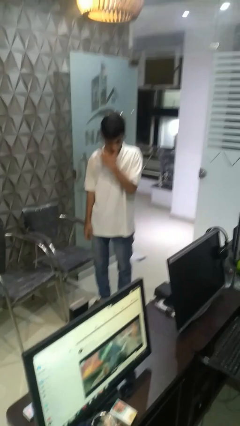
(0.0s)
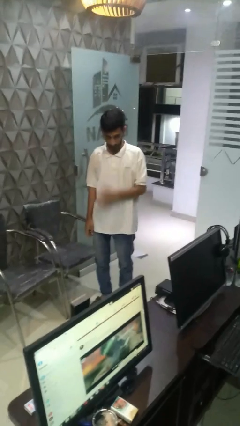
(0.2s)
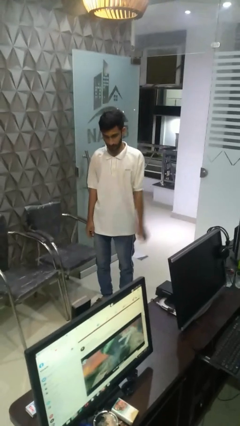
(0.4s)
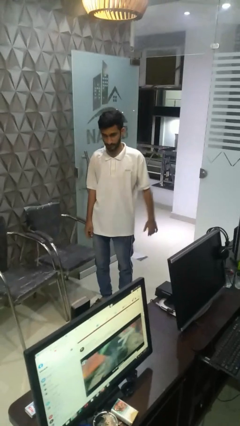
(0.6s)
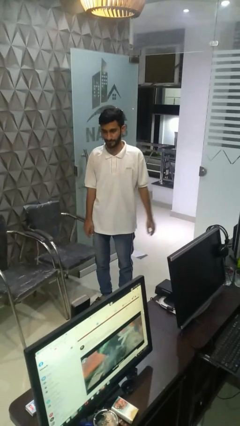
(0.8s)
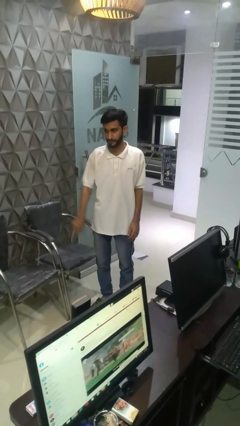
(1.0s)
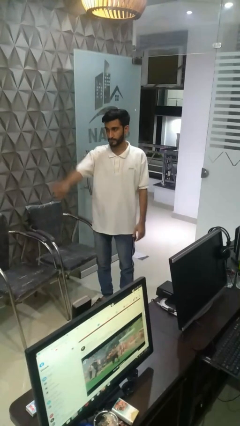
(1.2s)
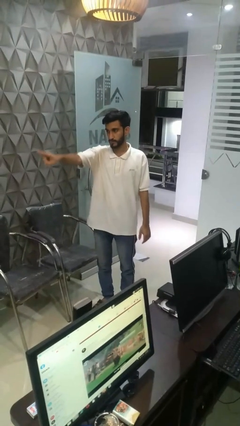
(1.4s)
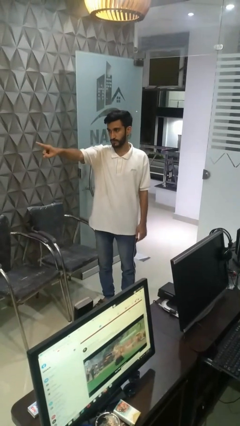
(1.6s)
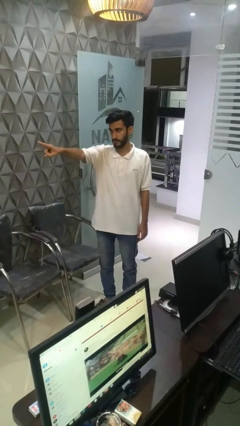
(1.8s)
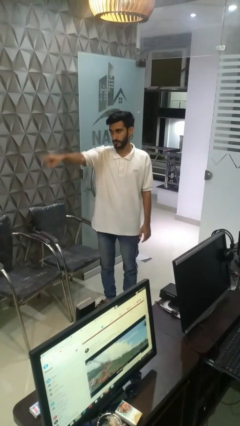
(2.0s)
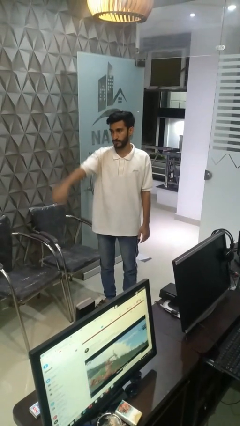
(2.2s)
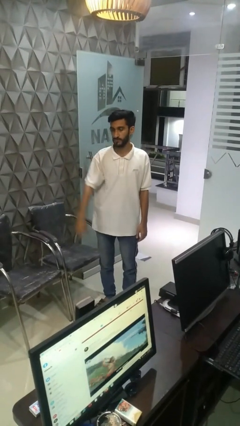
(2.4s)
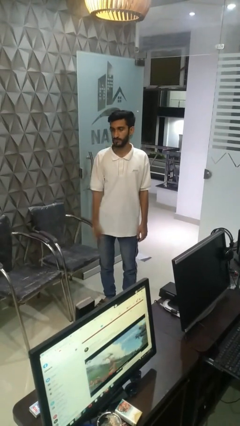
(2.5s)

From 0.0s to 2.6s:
person points at person

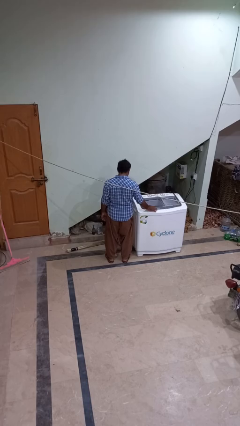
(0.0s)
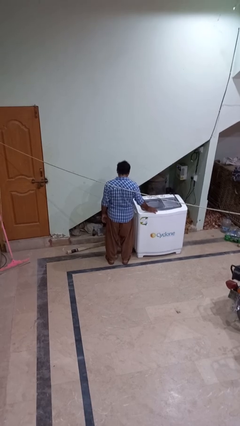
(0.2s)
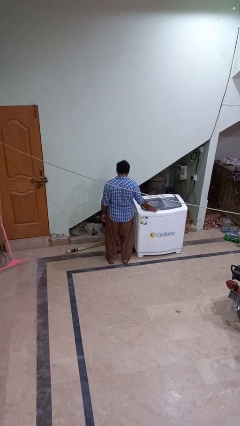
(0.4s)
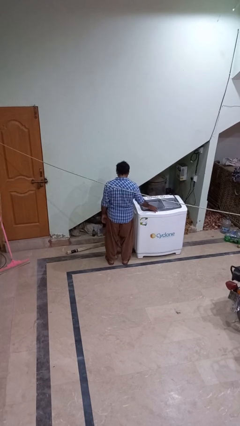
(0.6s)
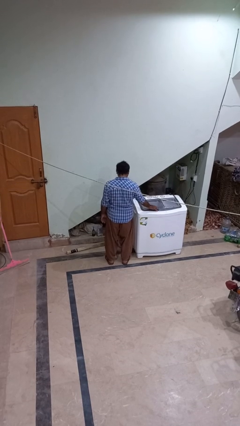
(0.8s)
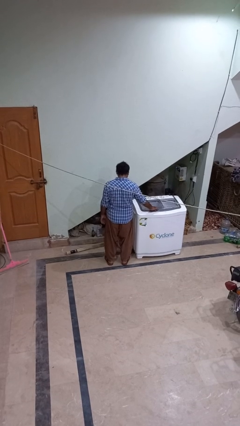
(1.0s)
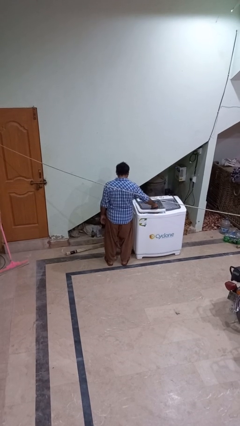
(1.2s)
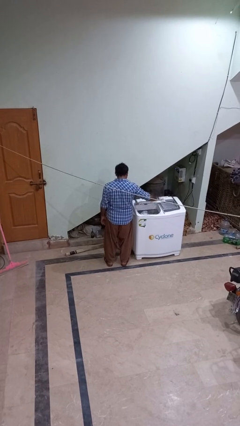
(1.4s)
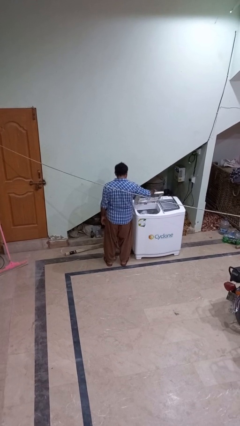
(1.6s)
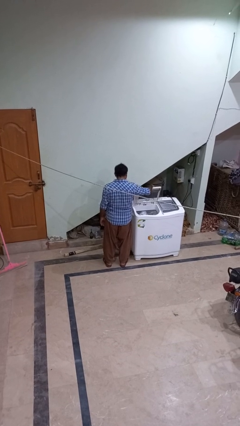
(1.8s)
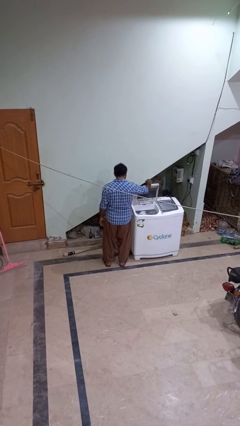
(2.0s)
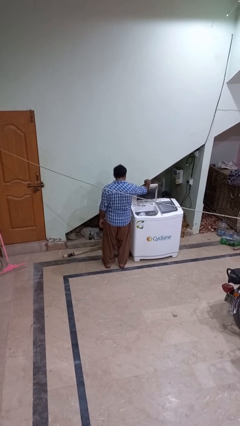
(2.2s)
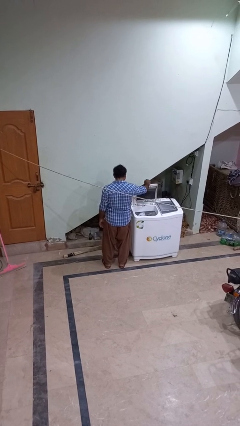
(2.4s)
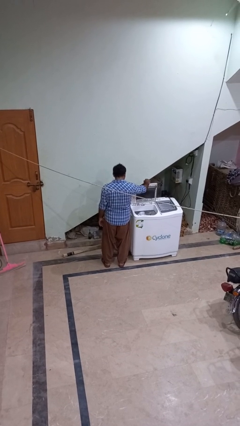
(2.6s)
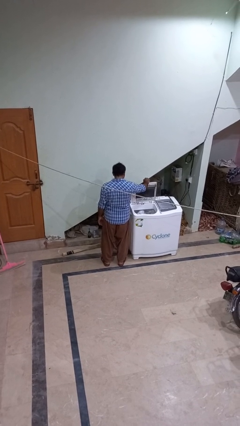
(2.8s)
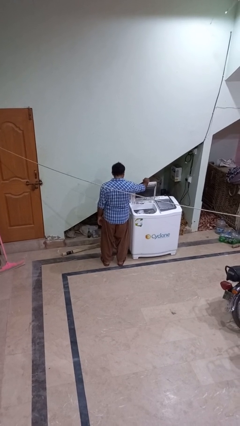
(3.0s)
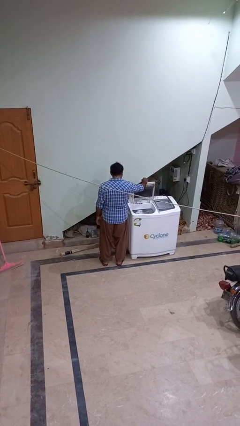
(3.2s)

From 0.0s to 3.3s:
person opens clothes washer

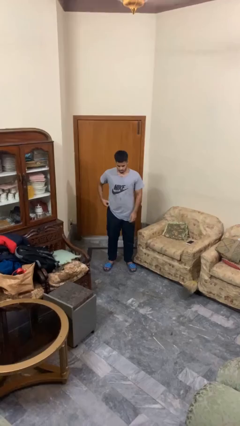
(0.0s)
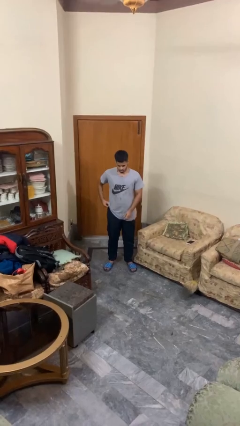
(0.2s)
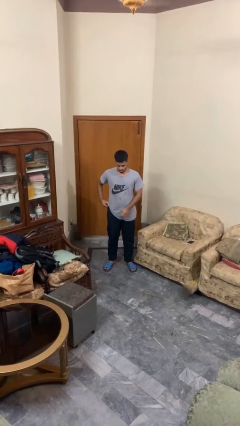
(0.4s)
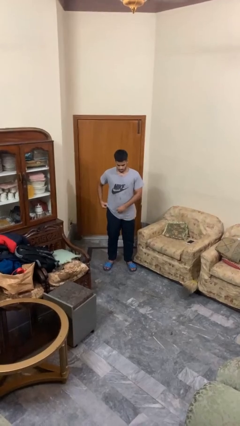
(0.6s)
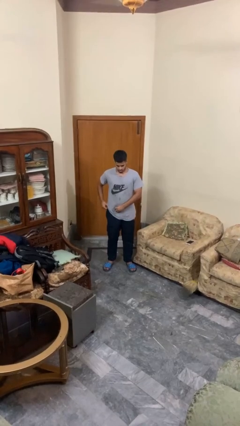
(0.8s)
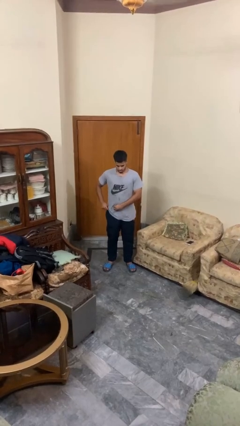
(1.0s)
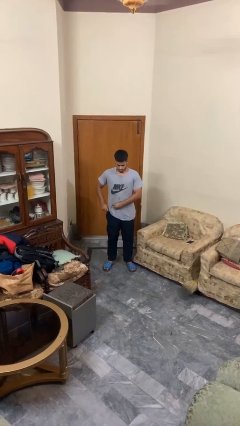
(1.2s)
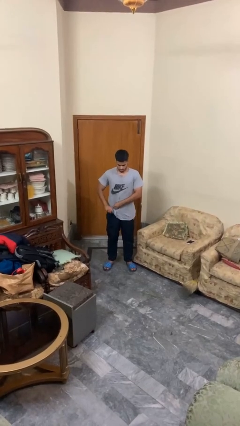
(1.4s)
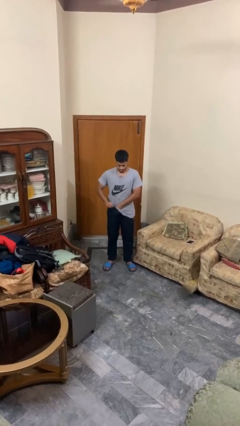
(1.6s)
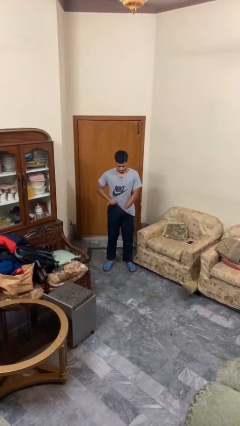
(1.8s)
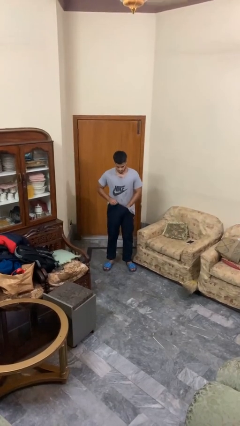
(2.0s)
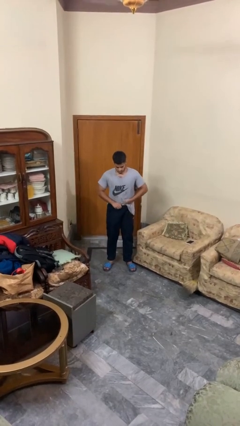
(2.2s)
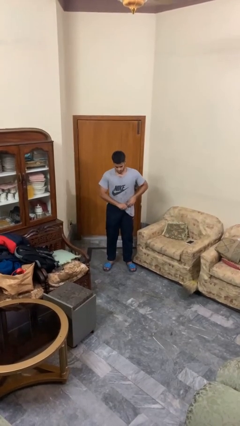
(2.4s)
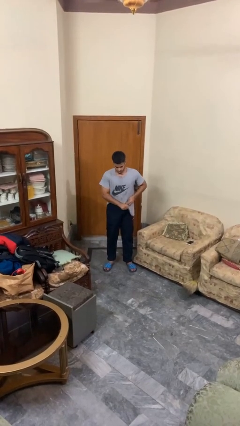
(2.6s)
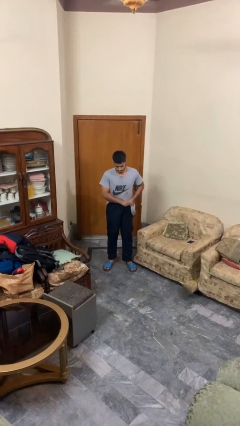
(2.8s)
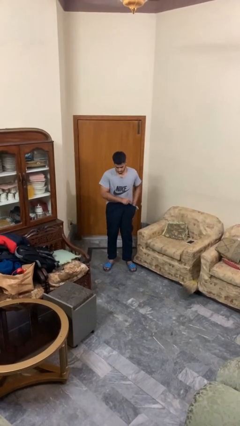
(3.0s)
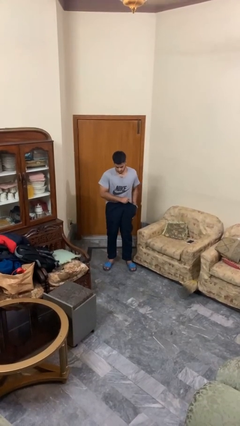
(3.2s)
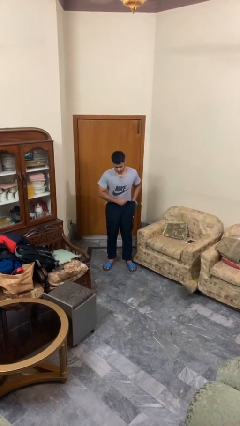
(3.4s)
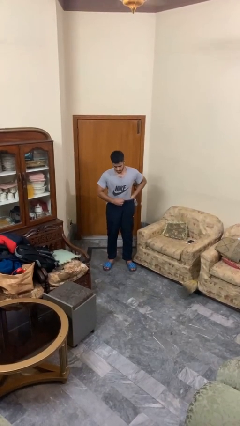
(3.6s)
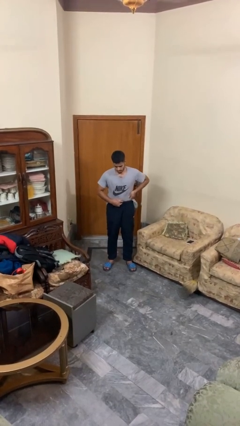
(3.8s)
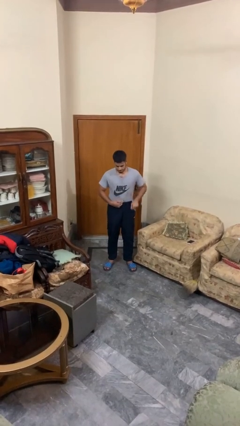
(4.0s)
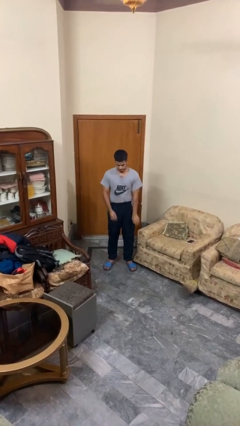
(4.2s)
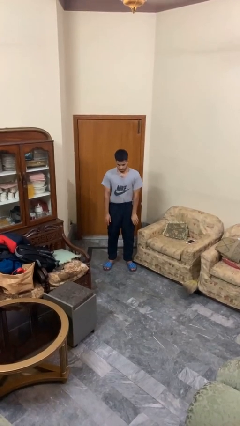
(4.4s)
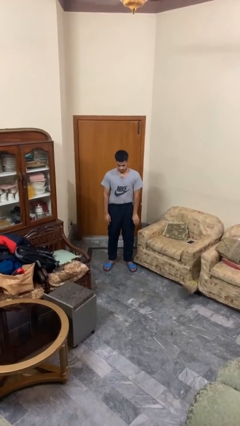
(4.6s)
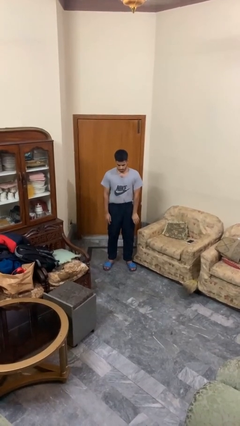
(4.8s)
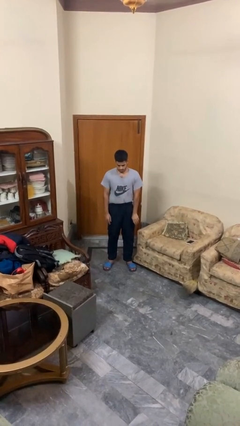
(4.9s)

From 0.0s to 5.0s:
person tucks in shirt

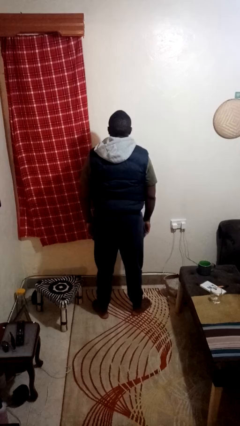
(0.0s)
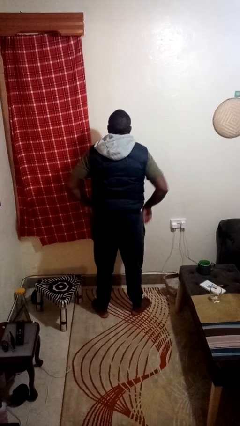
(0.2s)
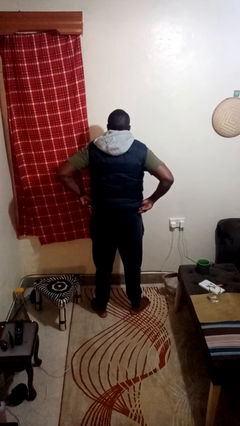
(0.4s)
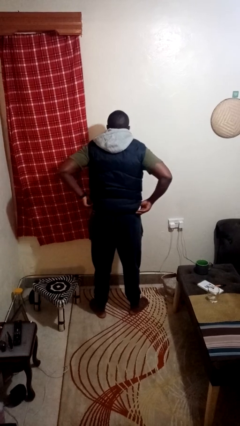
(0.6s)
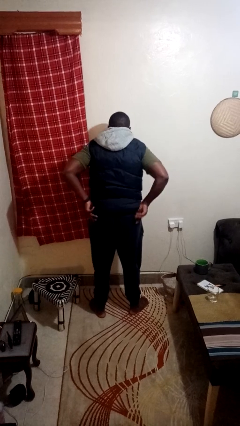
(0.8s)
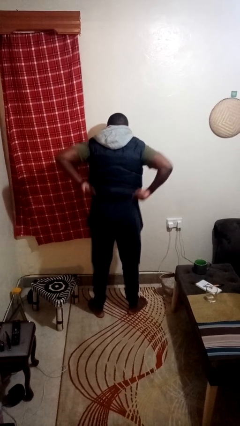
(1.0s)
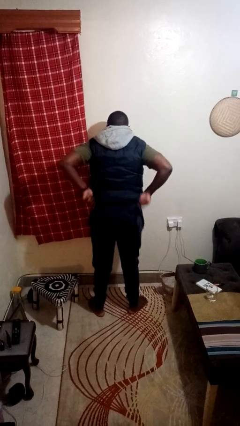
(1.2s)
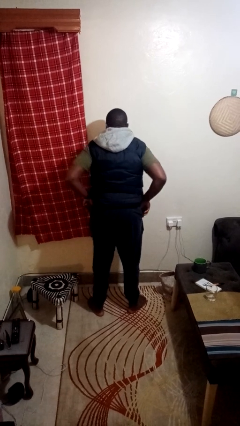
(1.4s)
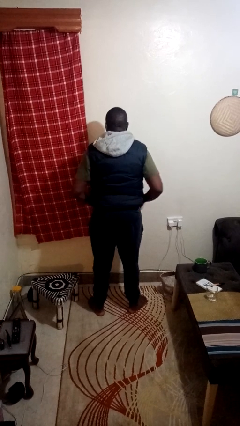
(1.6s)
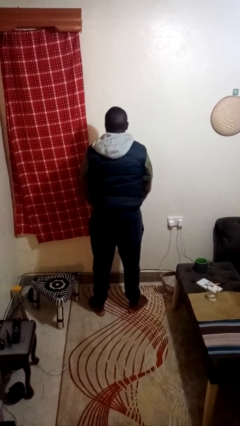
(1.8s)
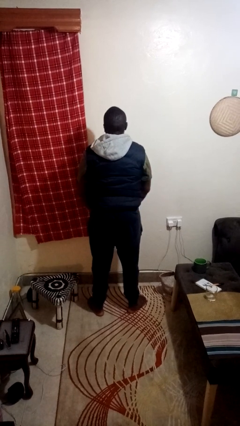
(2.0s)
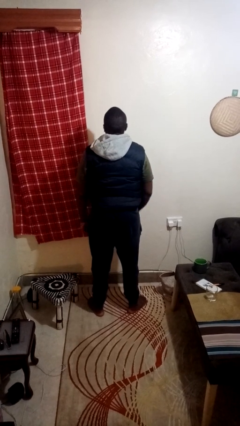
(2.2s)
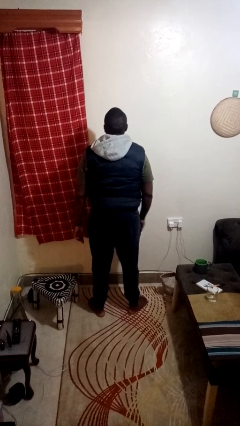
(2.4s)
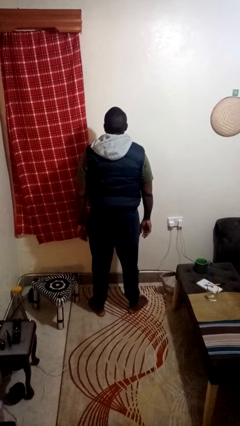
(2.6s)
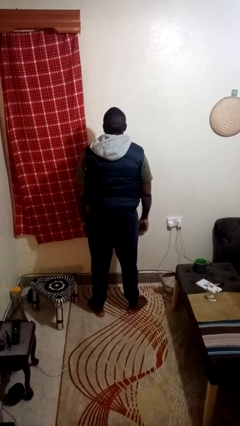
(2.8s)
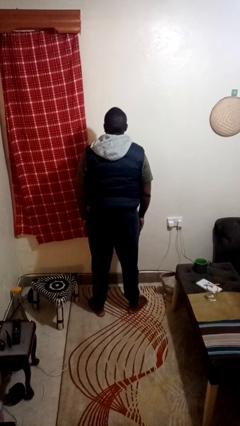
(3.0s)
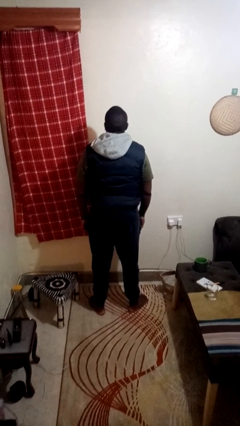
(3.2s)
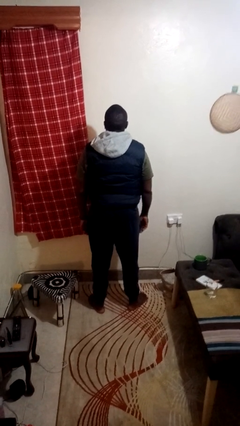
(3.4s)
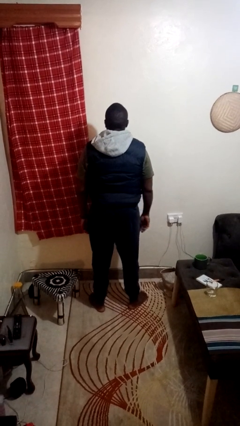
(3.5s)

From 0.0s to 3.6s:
person hikes up pants

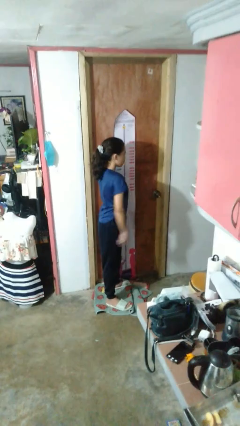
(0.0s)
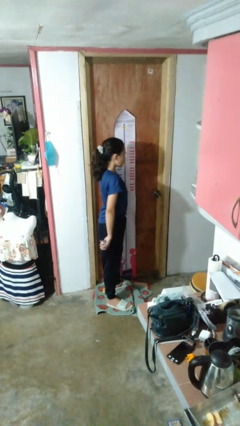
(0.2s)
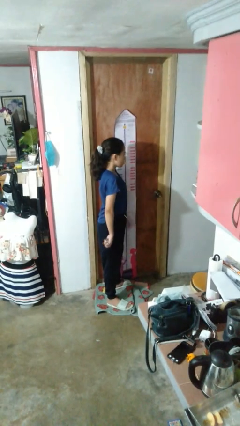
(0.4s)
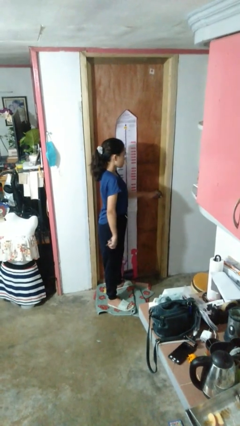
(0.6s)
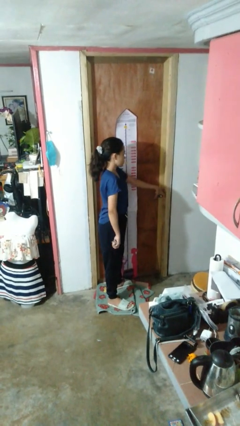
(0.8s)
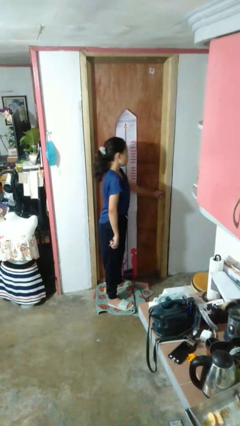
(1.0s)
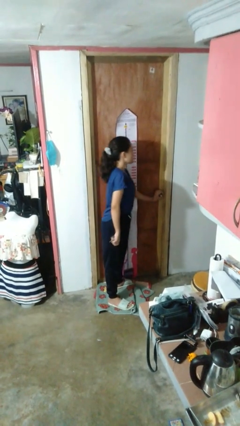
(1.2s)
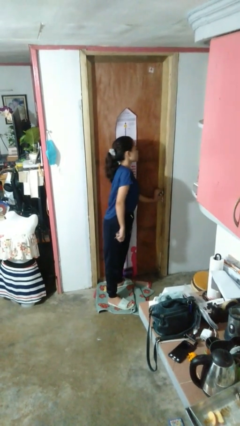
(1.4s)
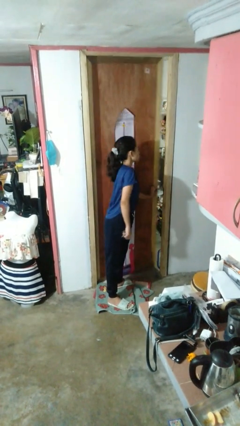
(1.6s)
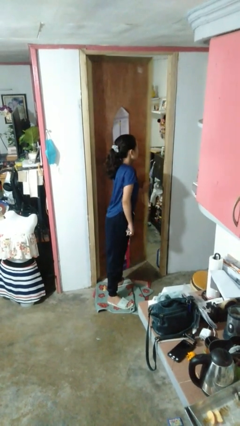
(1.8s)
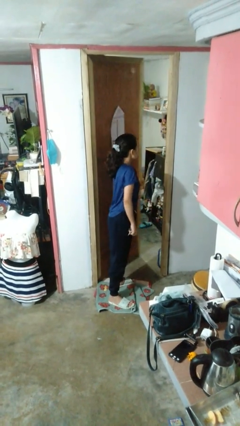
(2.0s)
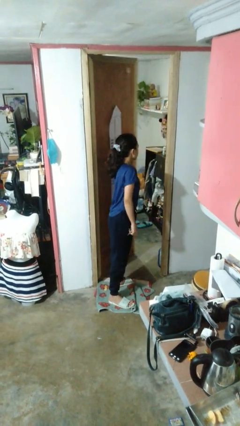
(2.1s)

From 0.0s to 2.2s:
person opens facility door

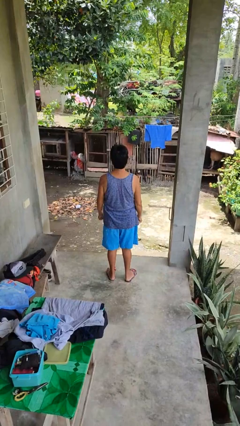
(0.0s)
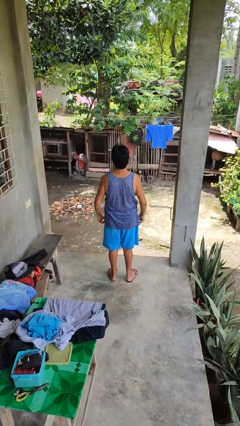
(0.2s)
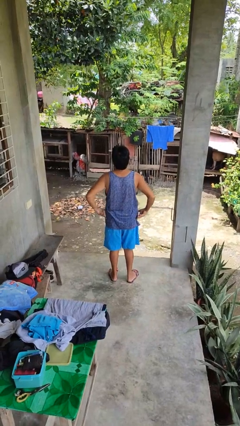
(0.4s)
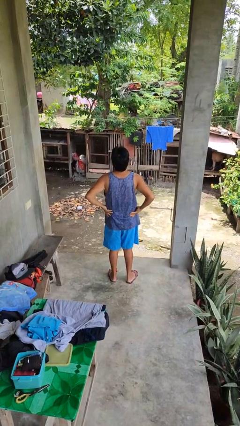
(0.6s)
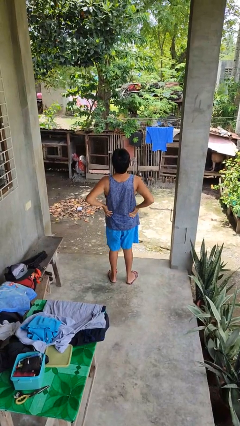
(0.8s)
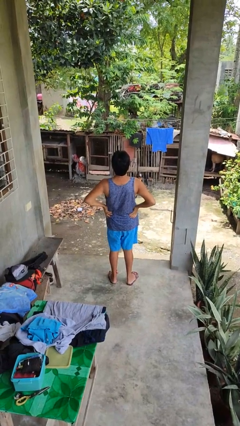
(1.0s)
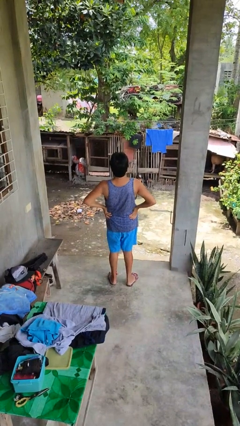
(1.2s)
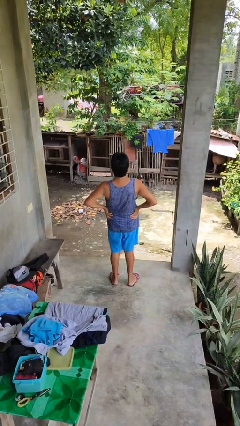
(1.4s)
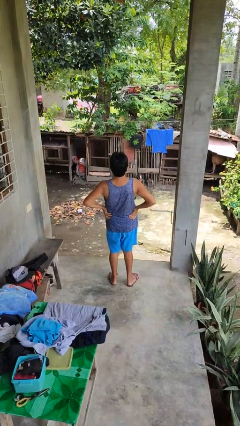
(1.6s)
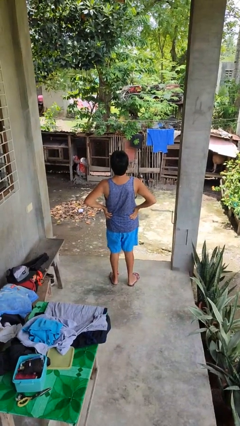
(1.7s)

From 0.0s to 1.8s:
person stretches back
